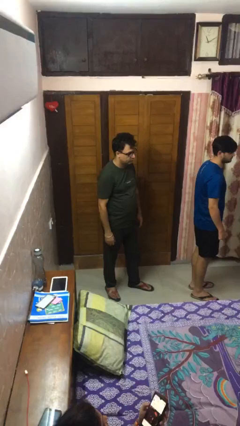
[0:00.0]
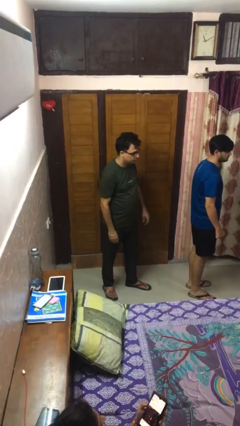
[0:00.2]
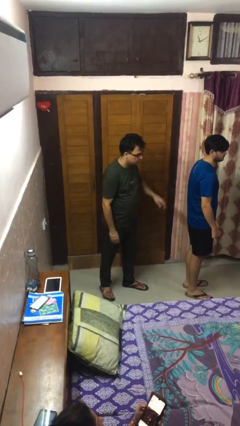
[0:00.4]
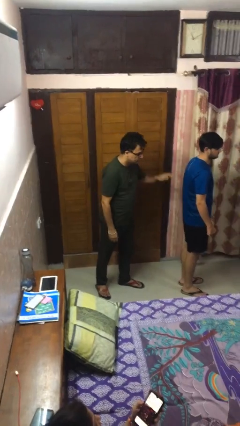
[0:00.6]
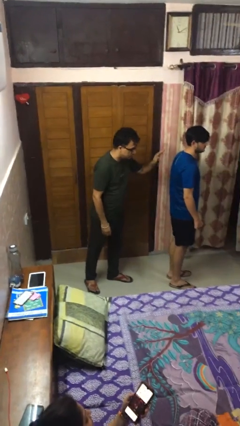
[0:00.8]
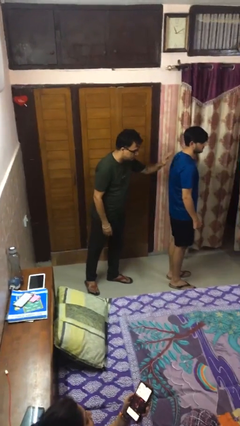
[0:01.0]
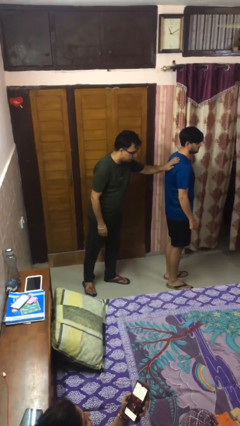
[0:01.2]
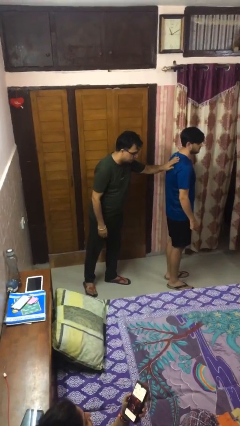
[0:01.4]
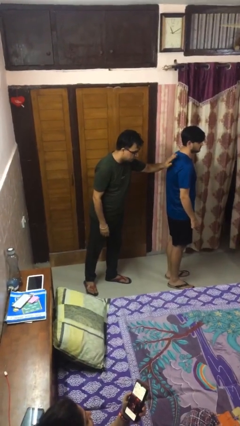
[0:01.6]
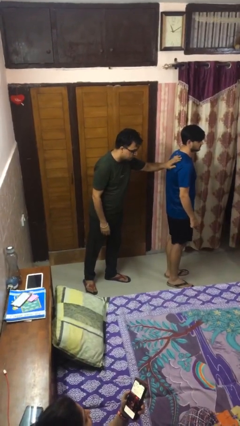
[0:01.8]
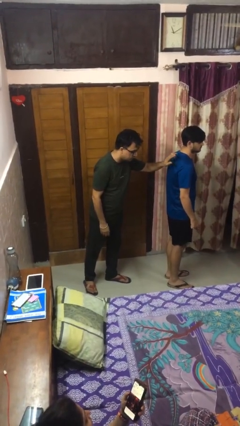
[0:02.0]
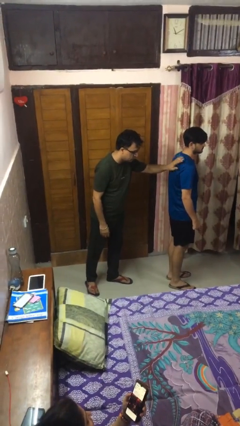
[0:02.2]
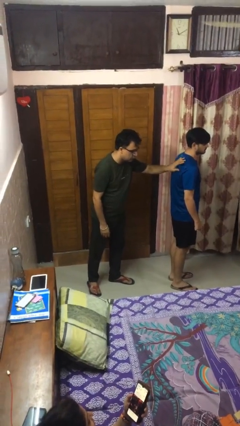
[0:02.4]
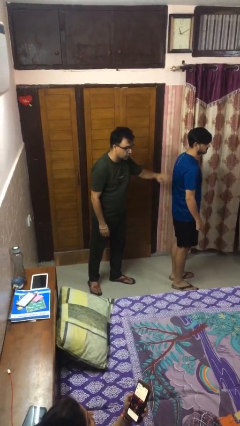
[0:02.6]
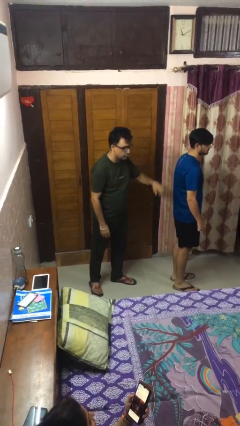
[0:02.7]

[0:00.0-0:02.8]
person touches back of person

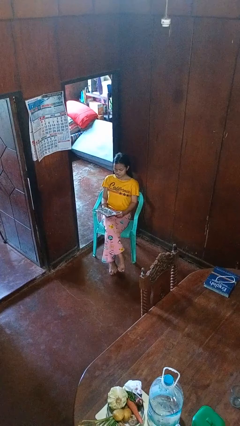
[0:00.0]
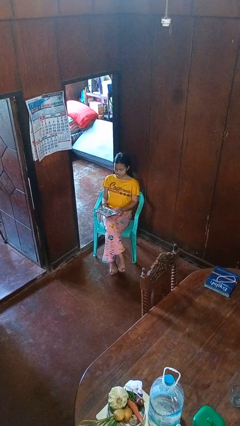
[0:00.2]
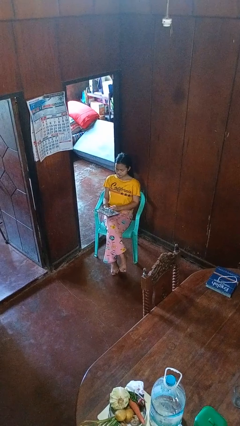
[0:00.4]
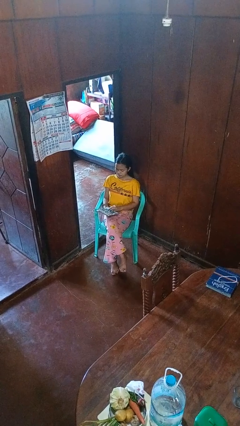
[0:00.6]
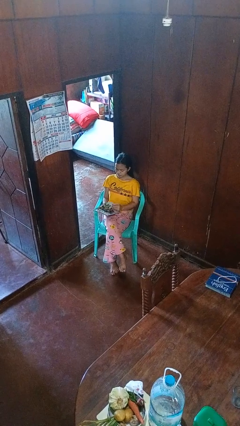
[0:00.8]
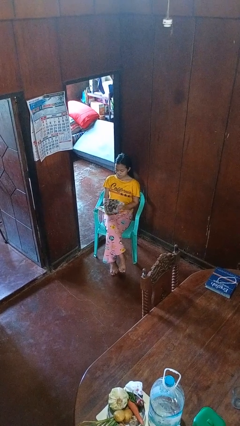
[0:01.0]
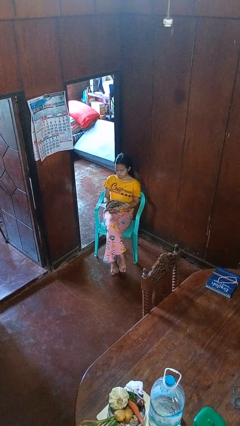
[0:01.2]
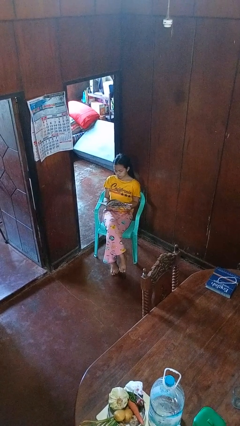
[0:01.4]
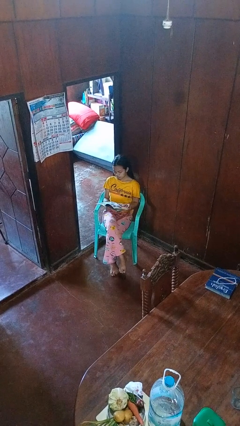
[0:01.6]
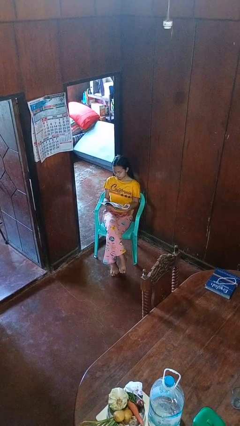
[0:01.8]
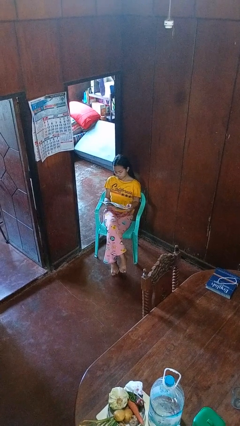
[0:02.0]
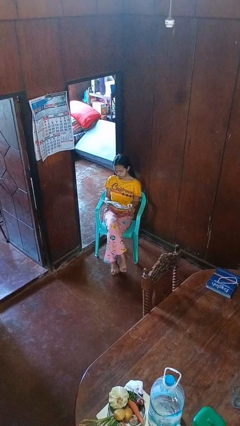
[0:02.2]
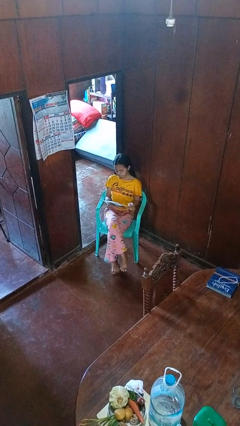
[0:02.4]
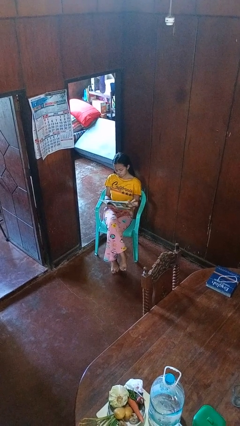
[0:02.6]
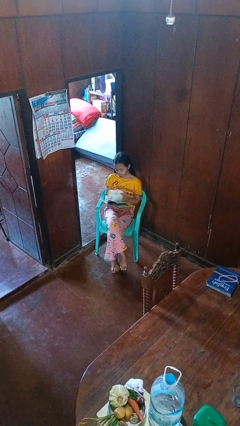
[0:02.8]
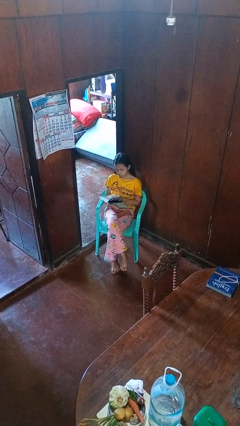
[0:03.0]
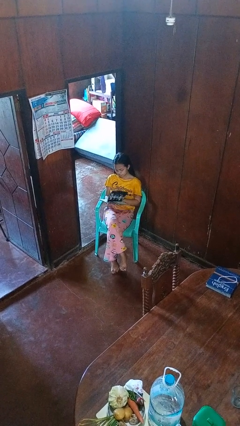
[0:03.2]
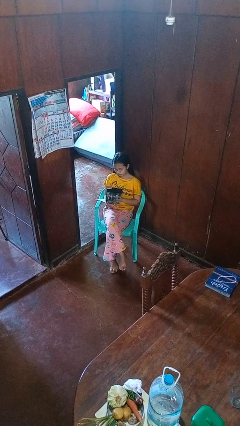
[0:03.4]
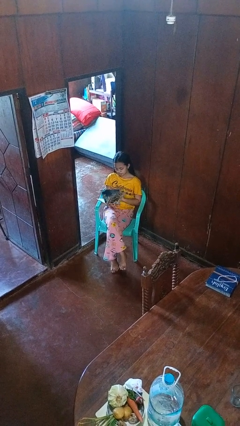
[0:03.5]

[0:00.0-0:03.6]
person reads magazine

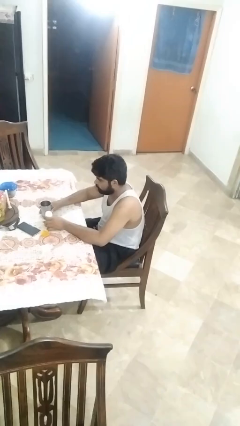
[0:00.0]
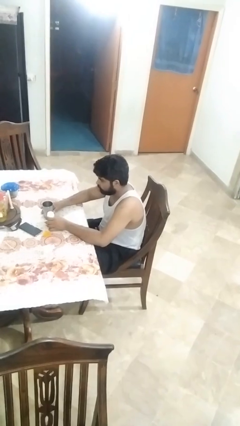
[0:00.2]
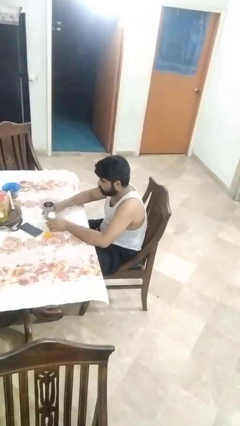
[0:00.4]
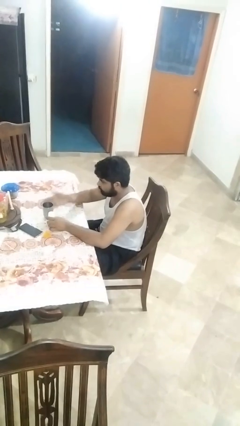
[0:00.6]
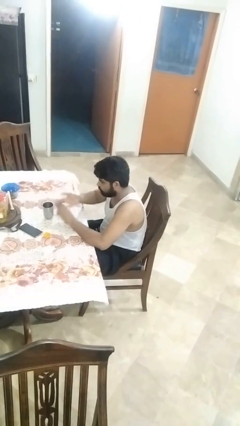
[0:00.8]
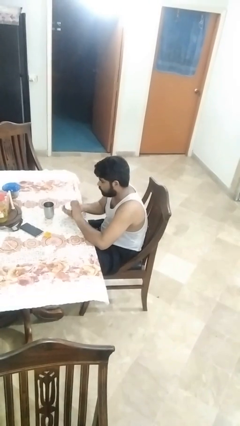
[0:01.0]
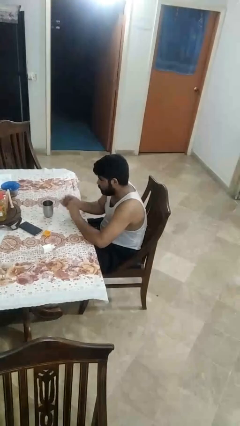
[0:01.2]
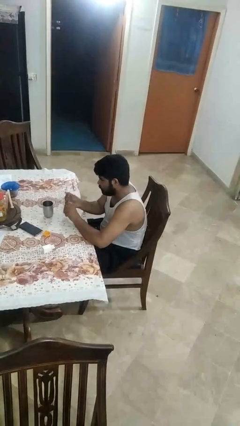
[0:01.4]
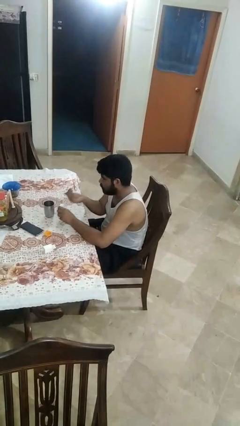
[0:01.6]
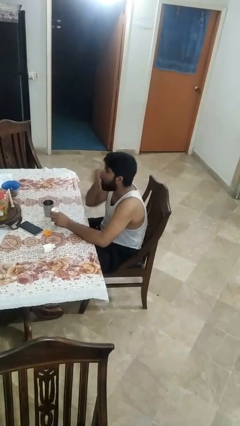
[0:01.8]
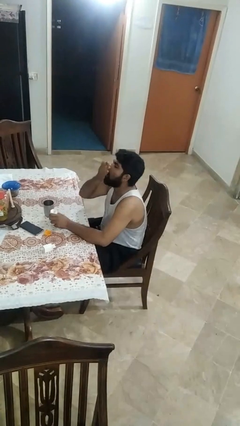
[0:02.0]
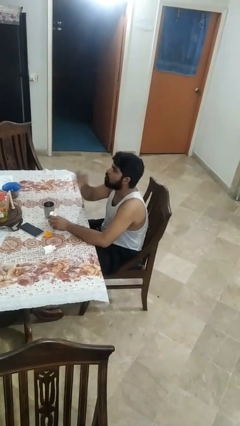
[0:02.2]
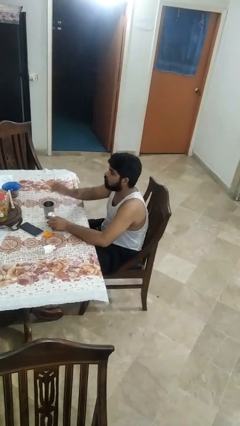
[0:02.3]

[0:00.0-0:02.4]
person takes medicine pills

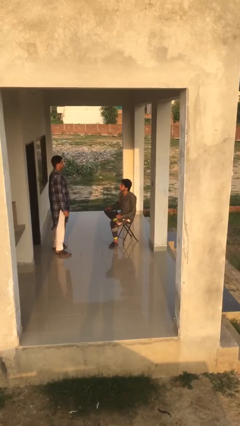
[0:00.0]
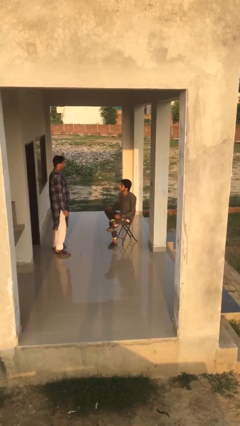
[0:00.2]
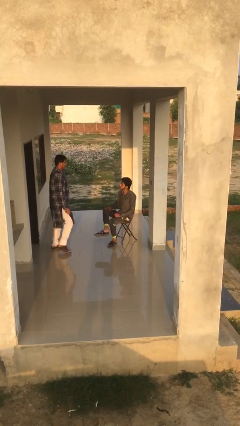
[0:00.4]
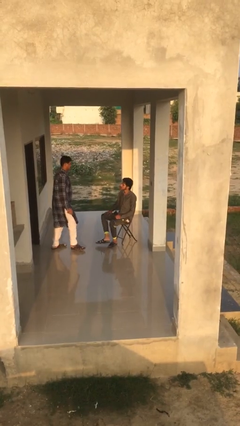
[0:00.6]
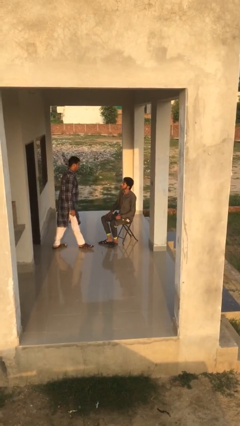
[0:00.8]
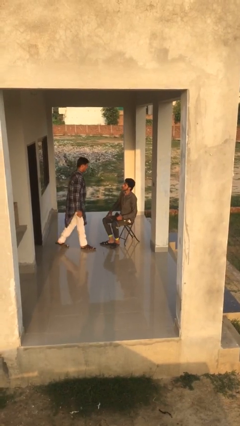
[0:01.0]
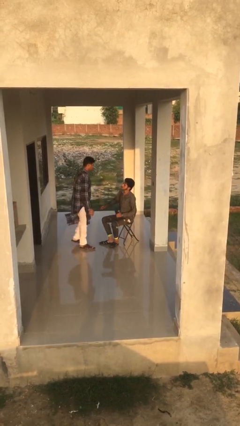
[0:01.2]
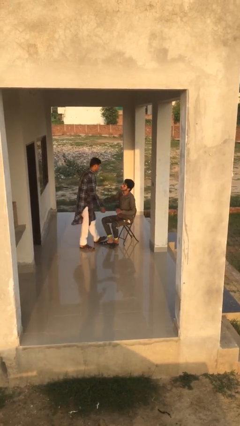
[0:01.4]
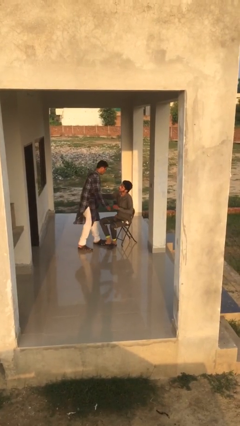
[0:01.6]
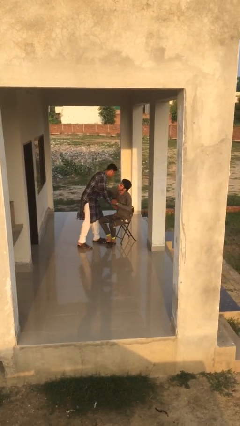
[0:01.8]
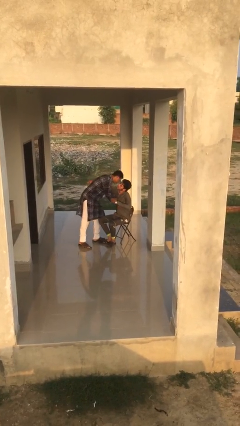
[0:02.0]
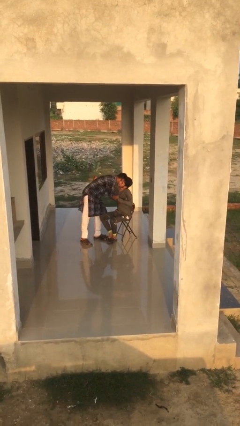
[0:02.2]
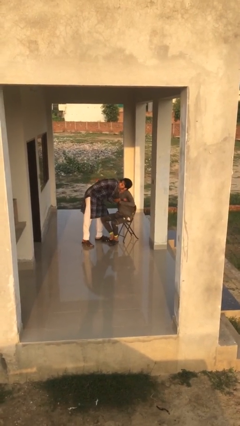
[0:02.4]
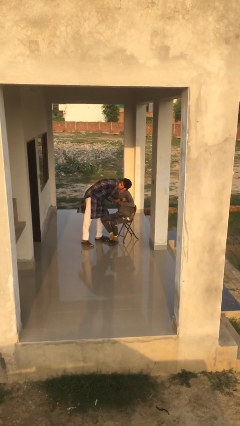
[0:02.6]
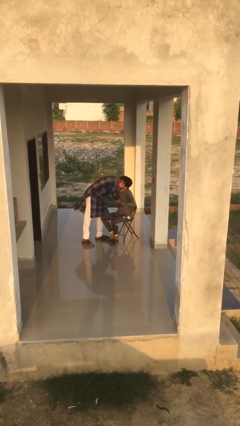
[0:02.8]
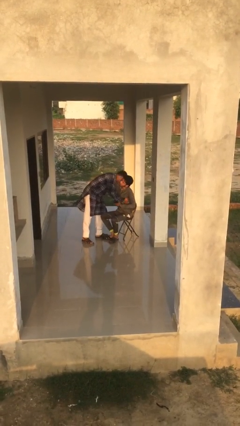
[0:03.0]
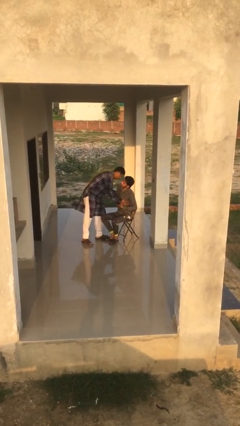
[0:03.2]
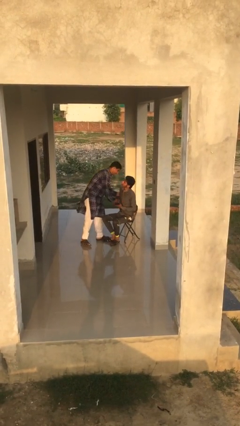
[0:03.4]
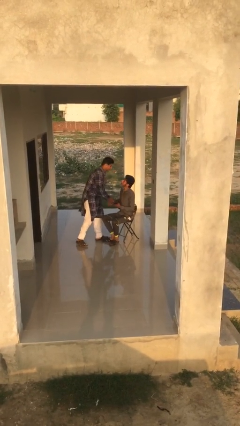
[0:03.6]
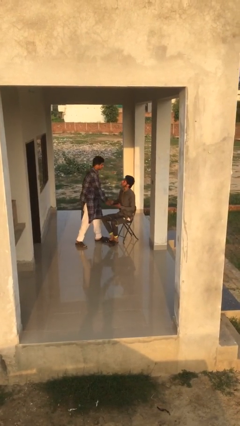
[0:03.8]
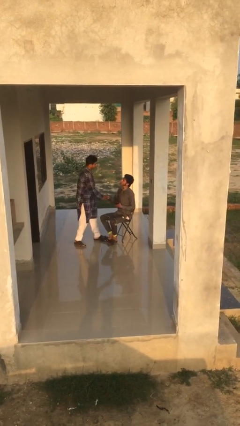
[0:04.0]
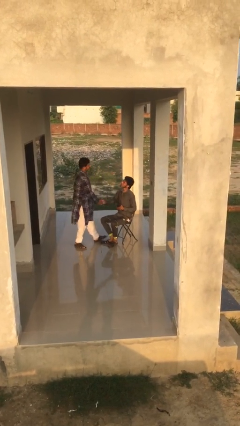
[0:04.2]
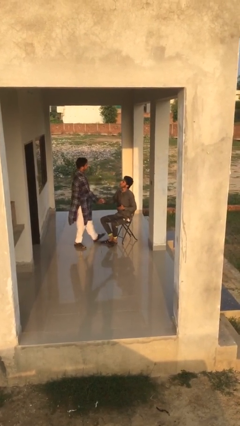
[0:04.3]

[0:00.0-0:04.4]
person embraces person

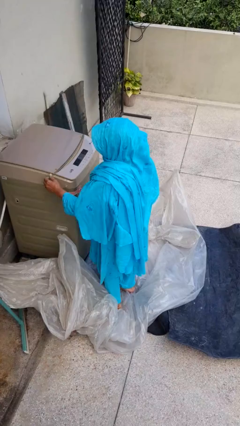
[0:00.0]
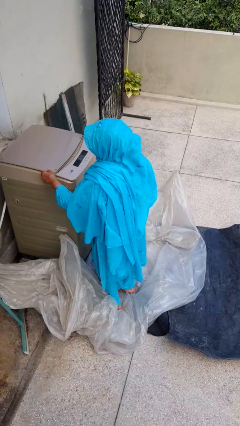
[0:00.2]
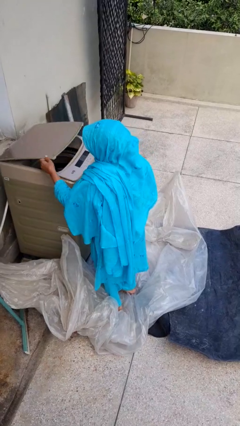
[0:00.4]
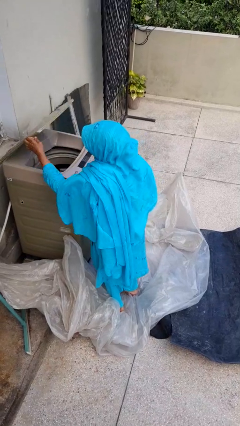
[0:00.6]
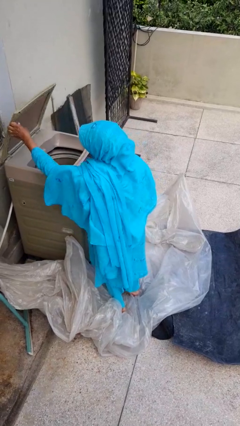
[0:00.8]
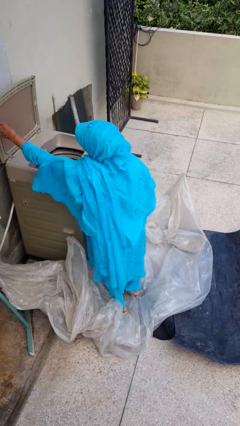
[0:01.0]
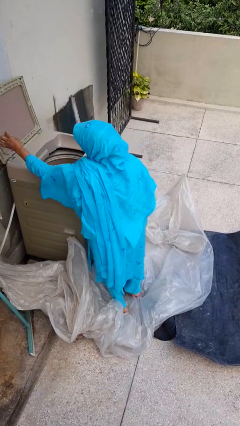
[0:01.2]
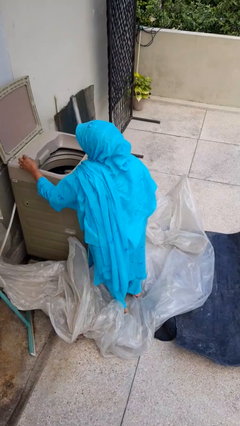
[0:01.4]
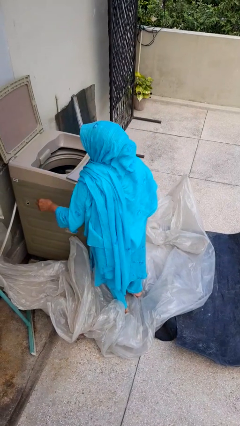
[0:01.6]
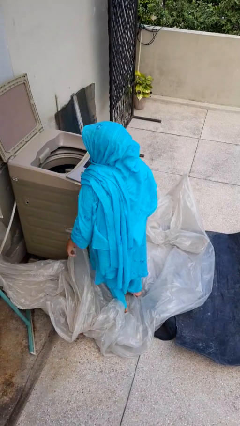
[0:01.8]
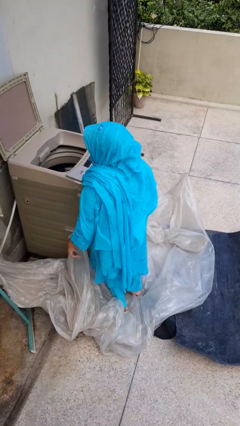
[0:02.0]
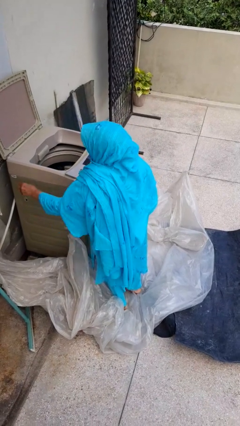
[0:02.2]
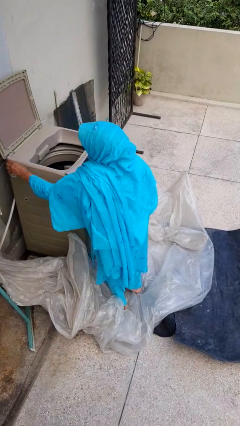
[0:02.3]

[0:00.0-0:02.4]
person opens clothes washer

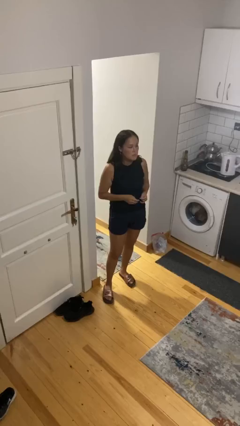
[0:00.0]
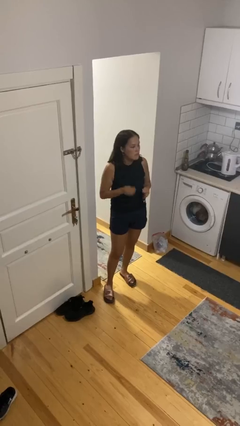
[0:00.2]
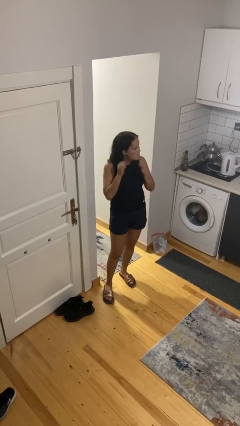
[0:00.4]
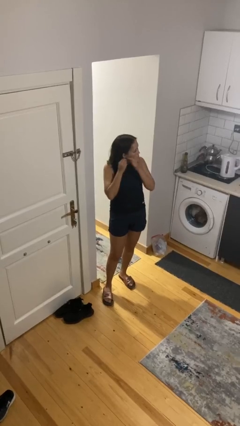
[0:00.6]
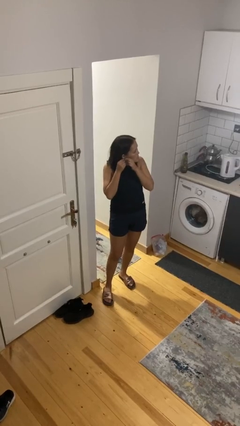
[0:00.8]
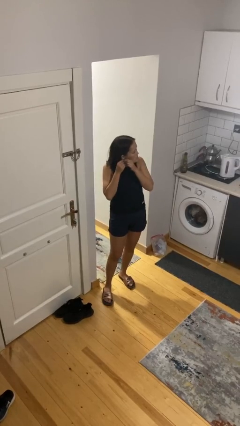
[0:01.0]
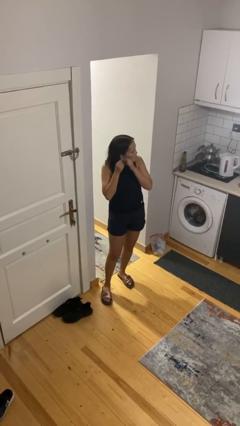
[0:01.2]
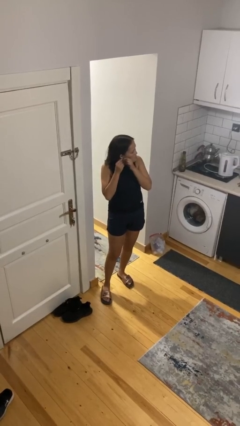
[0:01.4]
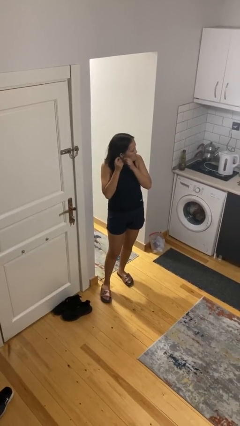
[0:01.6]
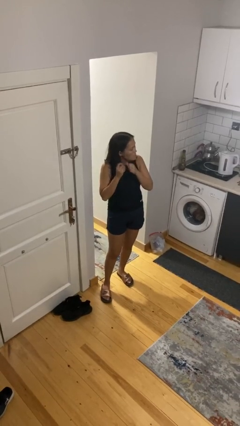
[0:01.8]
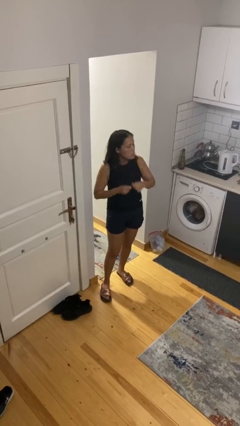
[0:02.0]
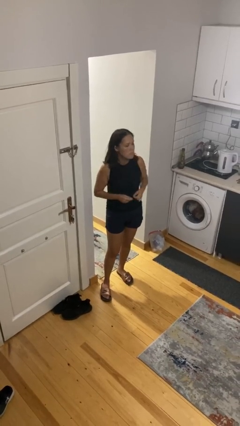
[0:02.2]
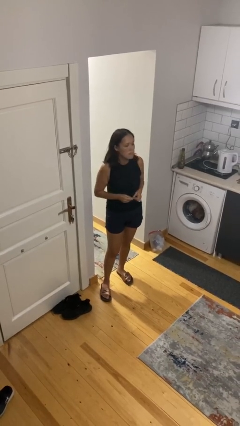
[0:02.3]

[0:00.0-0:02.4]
person takes off earrings
